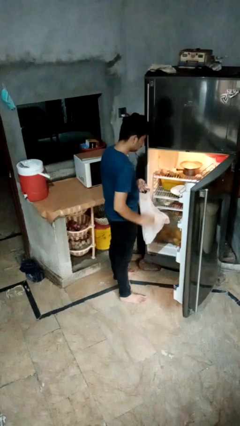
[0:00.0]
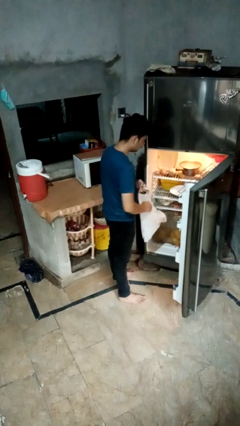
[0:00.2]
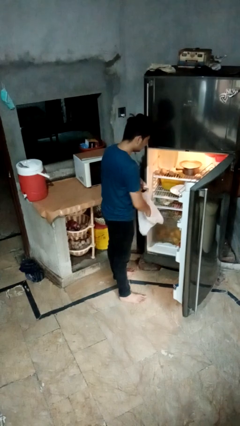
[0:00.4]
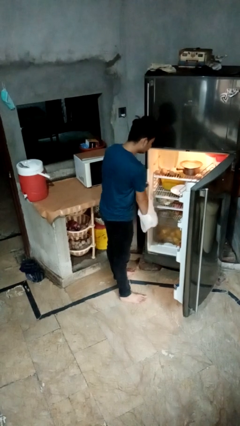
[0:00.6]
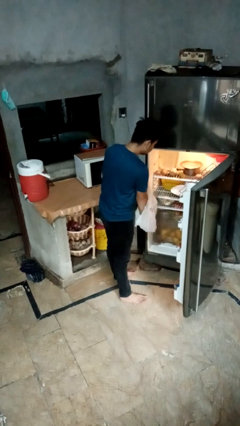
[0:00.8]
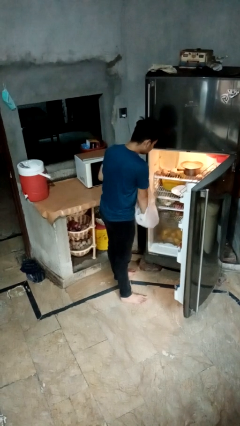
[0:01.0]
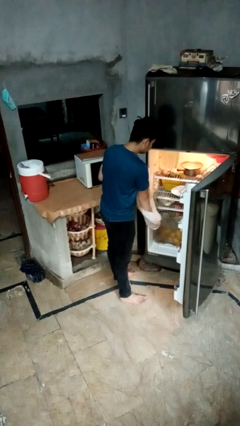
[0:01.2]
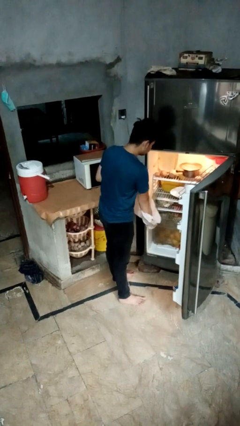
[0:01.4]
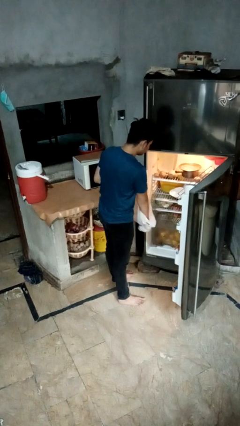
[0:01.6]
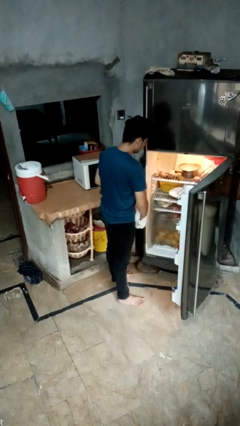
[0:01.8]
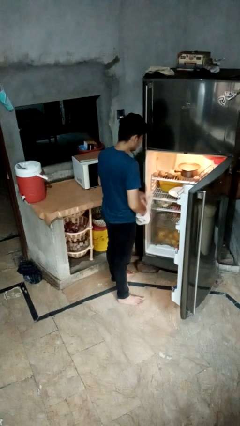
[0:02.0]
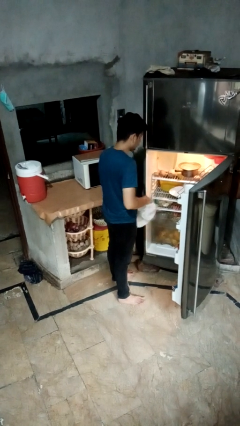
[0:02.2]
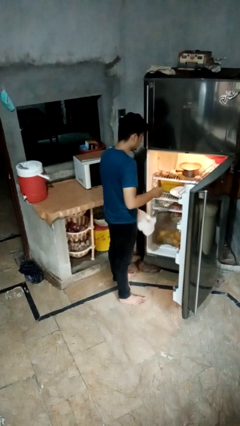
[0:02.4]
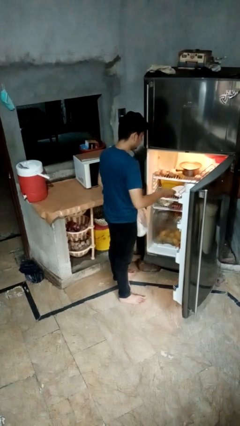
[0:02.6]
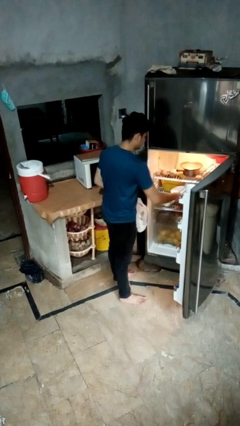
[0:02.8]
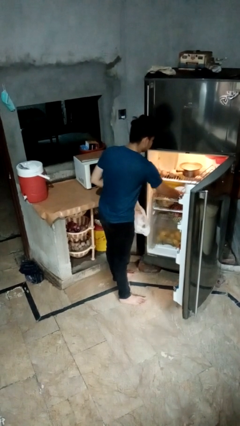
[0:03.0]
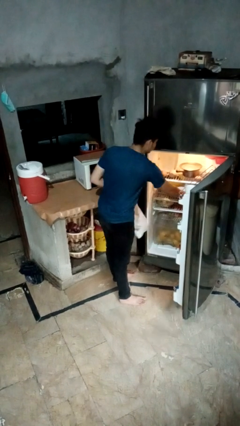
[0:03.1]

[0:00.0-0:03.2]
person loads groceries into refrigerator

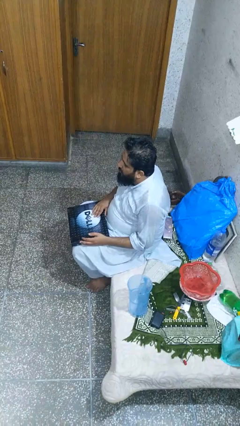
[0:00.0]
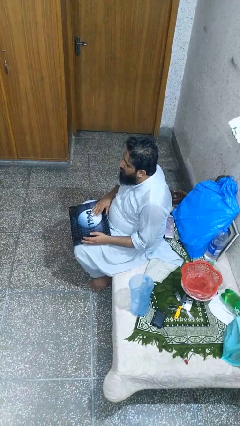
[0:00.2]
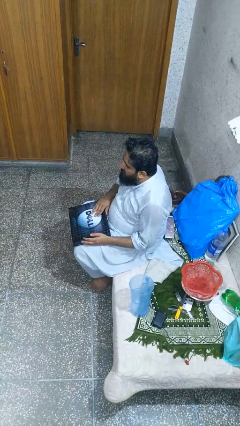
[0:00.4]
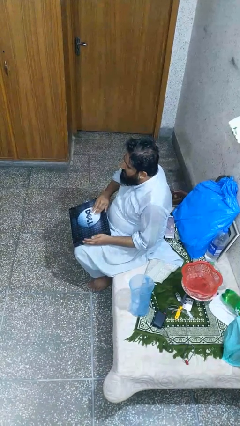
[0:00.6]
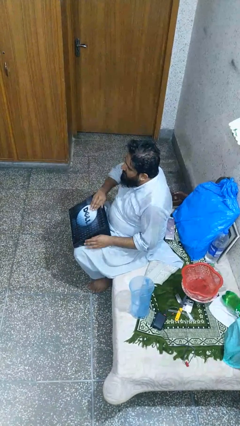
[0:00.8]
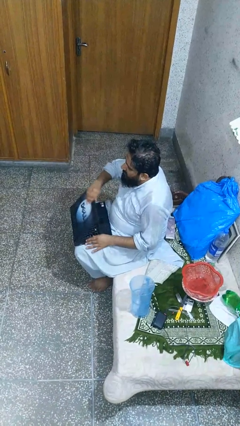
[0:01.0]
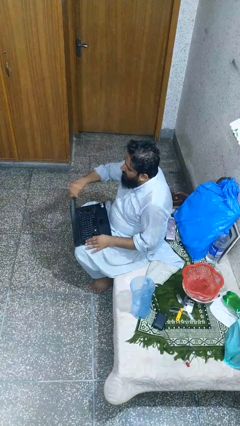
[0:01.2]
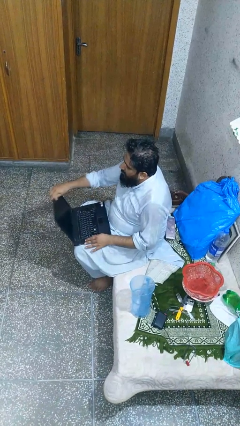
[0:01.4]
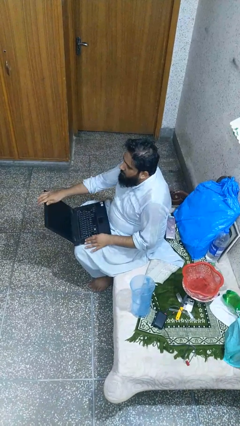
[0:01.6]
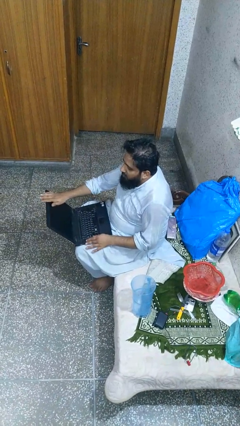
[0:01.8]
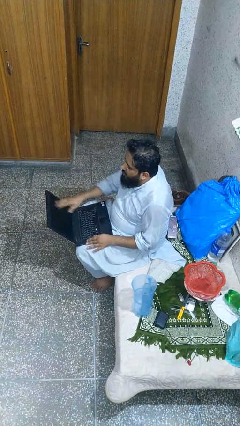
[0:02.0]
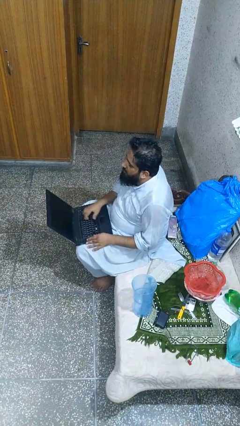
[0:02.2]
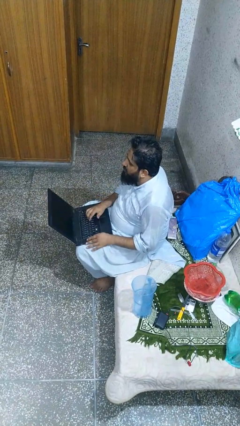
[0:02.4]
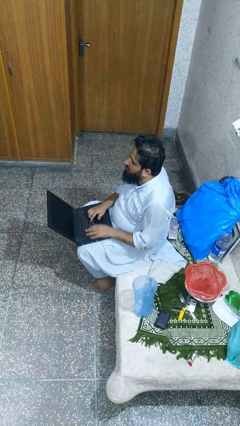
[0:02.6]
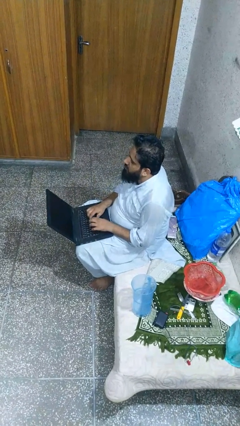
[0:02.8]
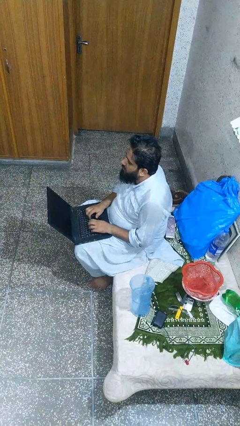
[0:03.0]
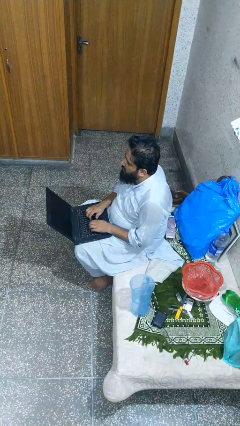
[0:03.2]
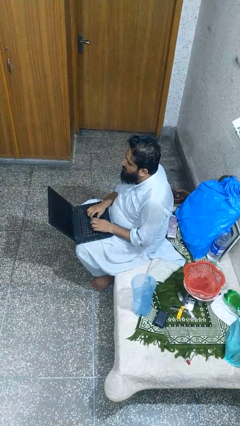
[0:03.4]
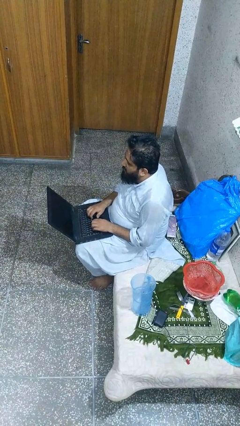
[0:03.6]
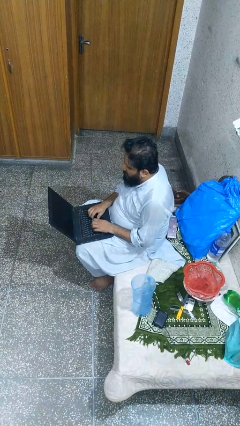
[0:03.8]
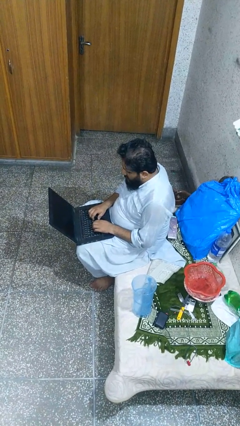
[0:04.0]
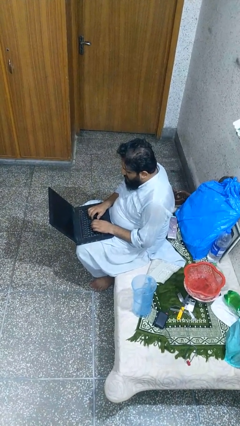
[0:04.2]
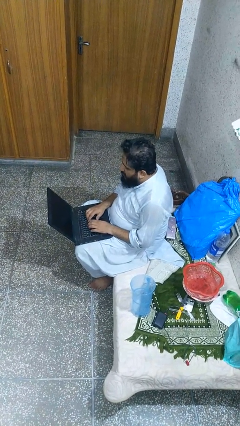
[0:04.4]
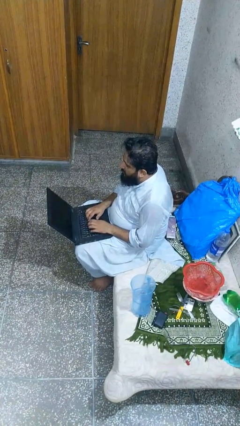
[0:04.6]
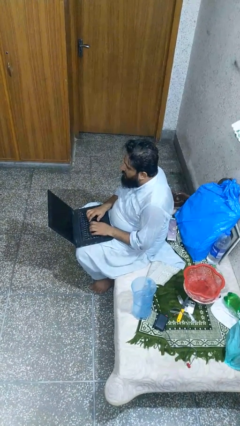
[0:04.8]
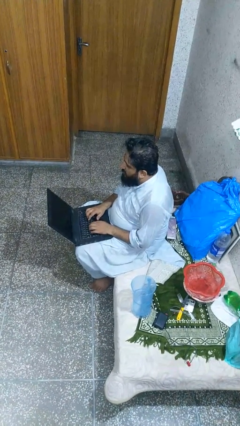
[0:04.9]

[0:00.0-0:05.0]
person opens laptop

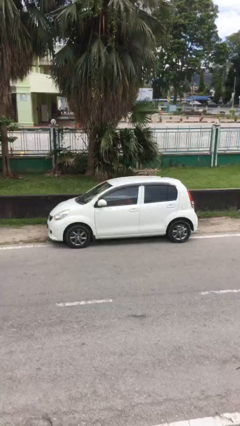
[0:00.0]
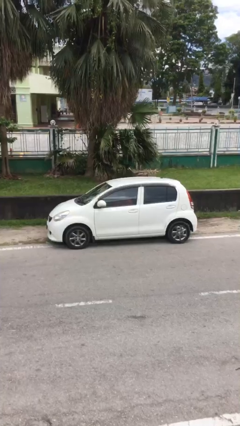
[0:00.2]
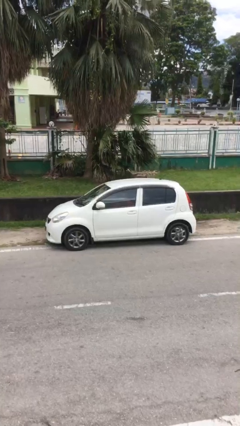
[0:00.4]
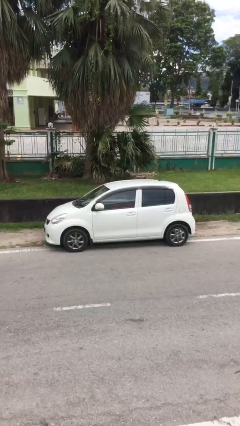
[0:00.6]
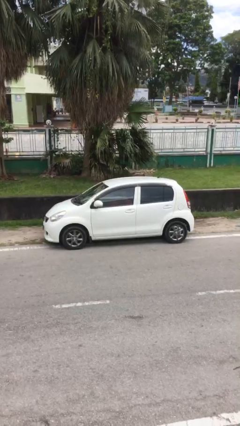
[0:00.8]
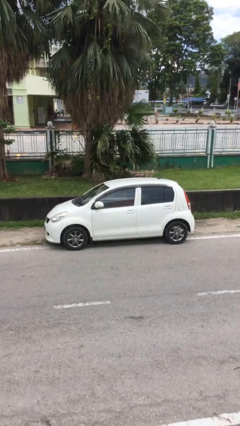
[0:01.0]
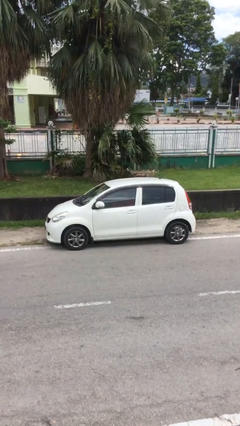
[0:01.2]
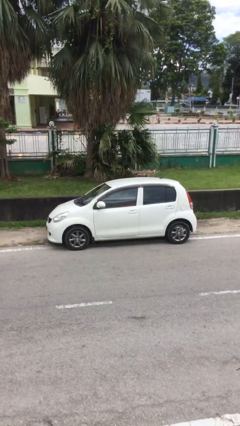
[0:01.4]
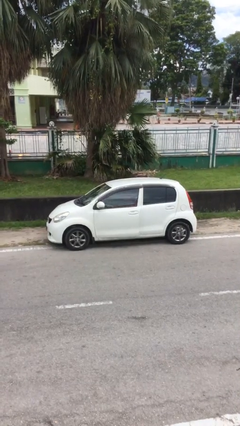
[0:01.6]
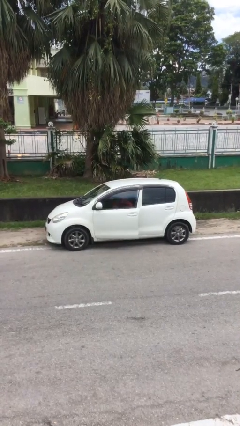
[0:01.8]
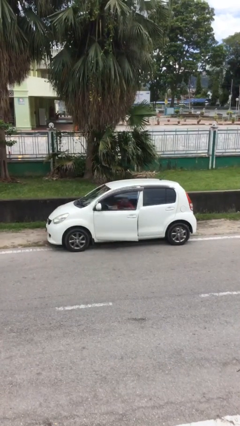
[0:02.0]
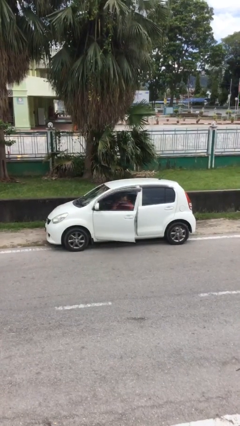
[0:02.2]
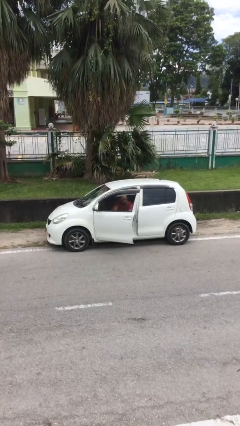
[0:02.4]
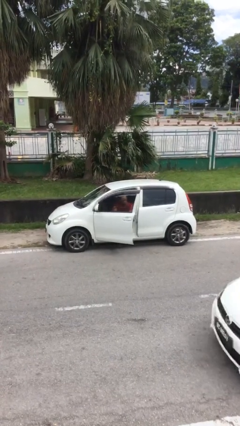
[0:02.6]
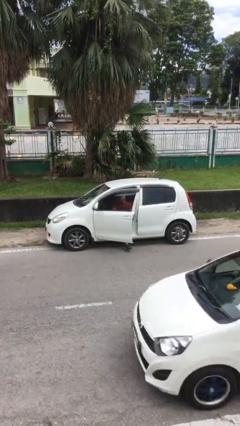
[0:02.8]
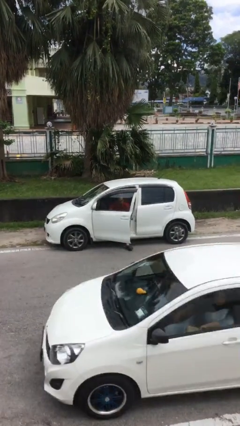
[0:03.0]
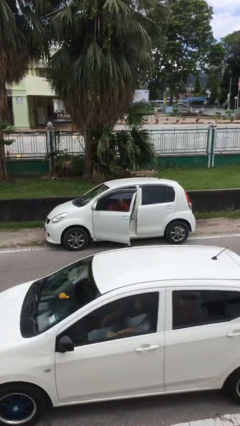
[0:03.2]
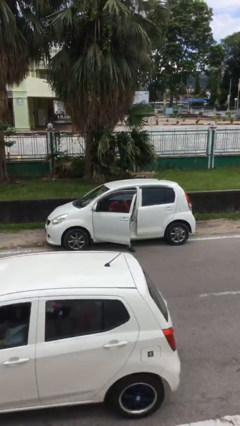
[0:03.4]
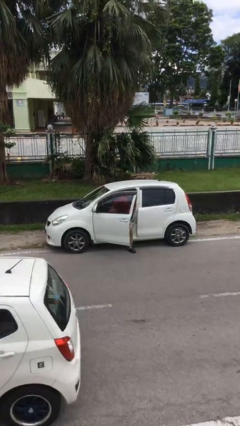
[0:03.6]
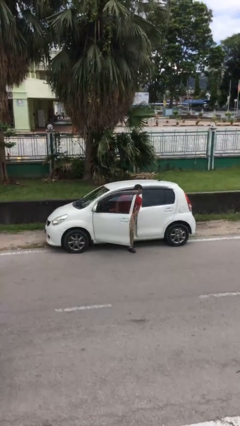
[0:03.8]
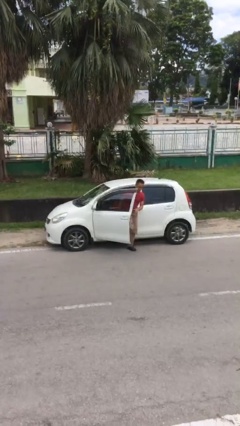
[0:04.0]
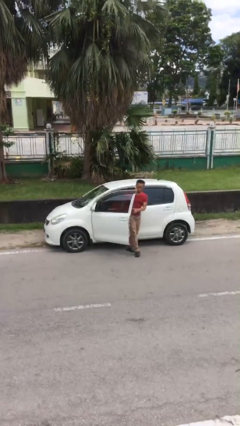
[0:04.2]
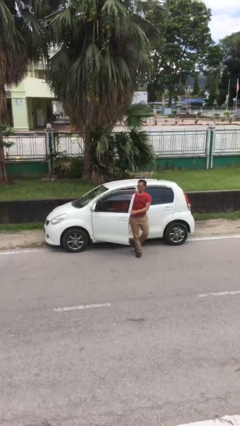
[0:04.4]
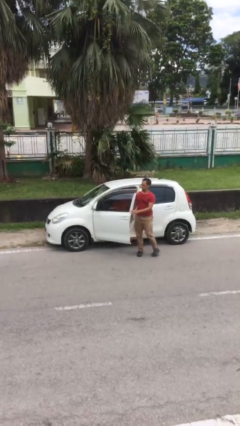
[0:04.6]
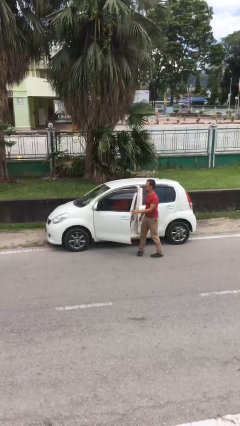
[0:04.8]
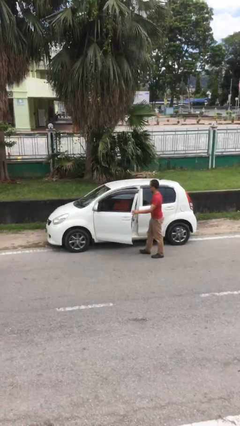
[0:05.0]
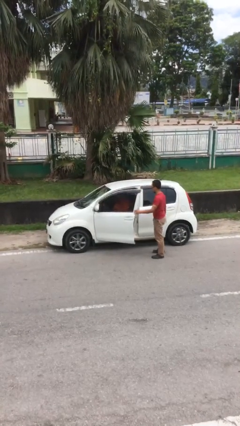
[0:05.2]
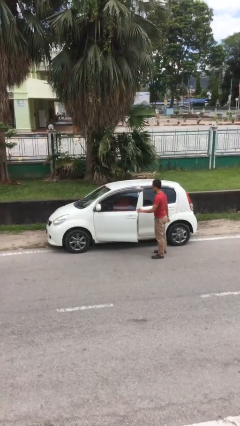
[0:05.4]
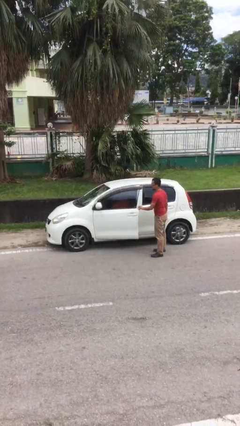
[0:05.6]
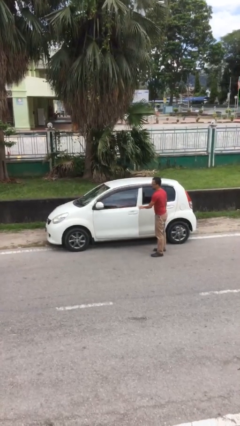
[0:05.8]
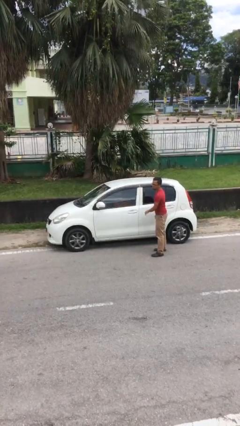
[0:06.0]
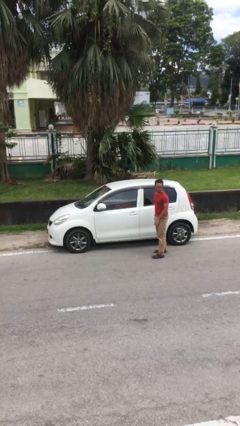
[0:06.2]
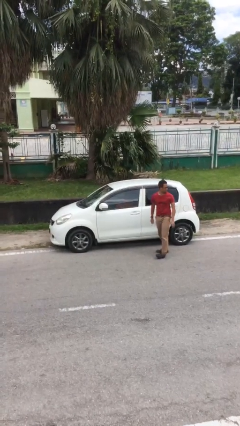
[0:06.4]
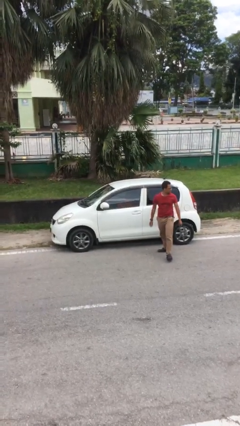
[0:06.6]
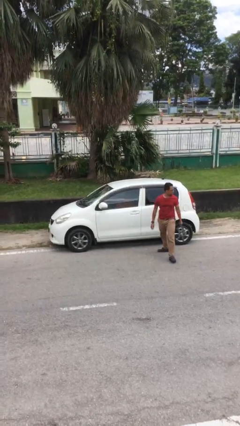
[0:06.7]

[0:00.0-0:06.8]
car drops off person

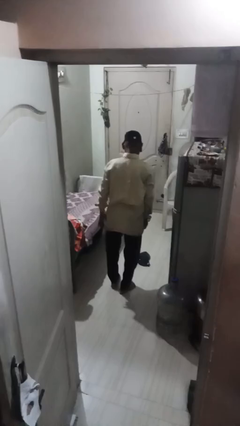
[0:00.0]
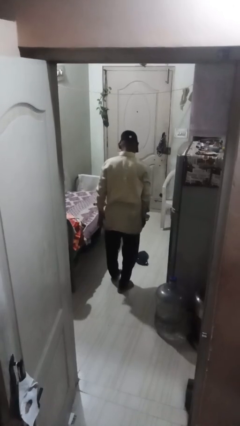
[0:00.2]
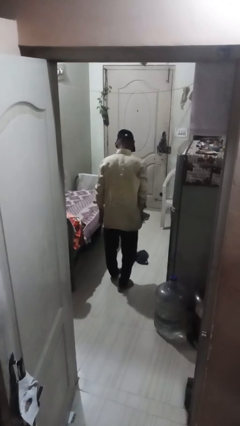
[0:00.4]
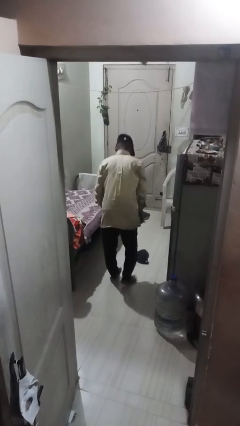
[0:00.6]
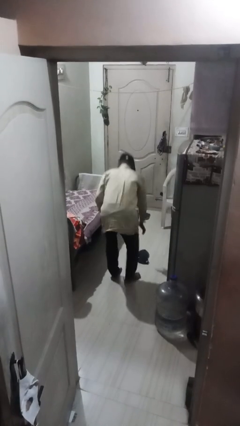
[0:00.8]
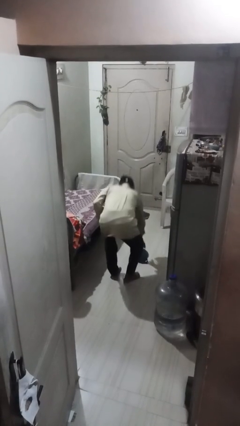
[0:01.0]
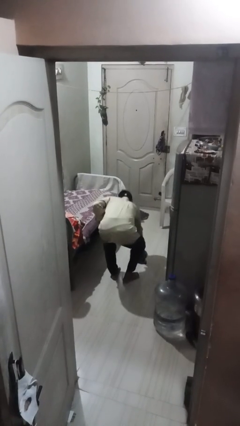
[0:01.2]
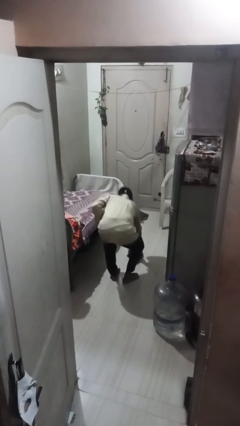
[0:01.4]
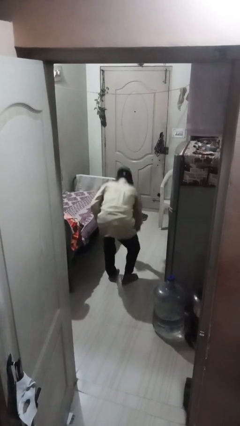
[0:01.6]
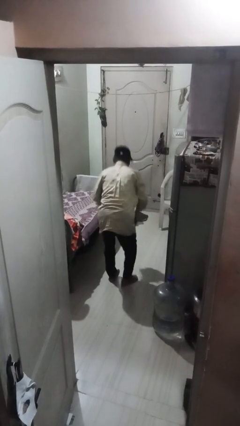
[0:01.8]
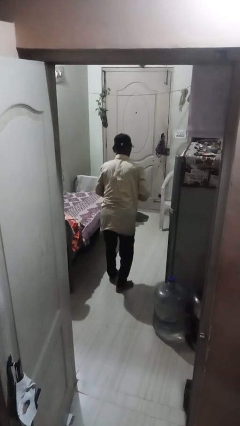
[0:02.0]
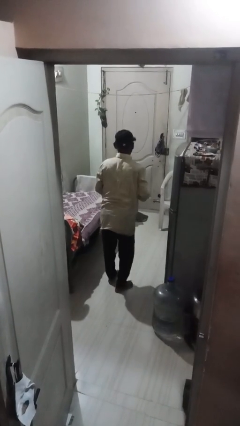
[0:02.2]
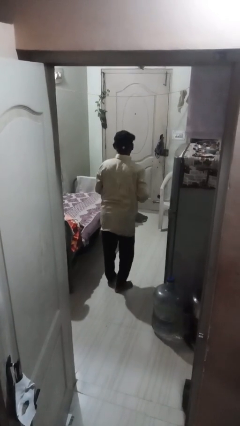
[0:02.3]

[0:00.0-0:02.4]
person picks up object from floor
